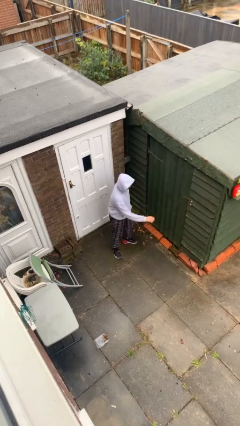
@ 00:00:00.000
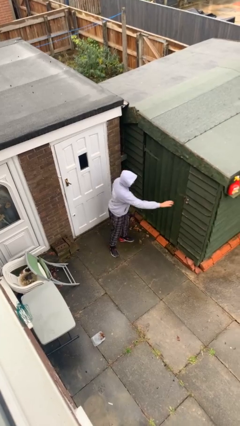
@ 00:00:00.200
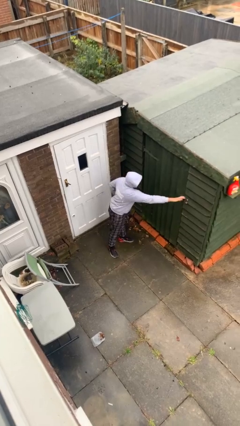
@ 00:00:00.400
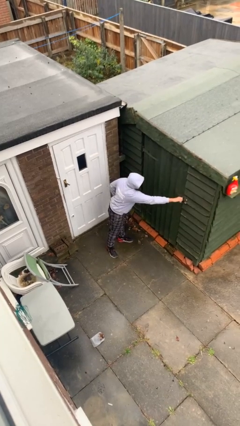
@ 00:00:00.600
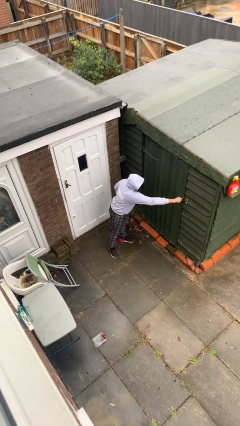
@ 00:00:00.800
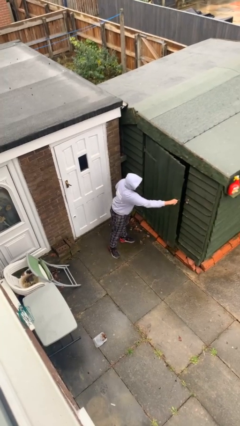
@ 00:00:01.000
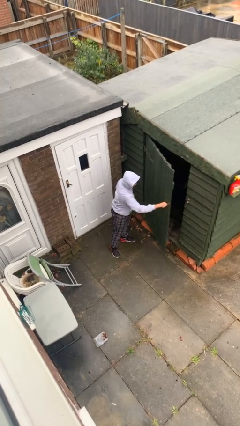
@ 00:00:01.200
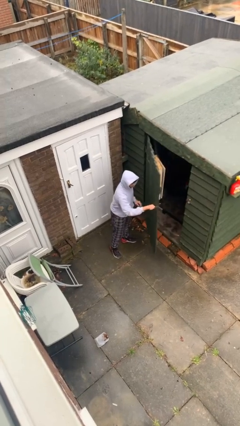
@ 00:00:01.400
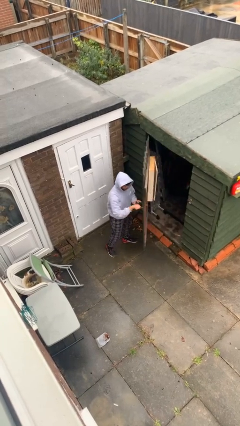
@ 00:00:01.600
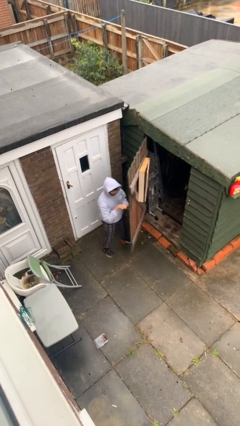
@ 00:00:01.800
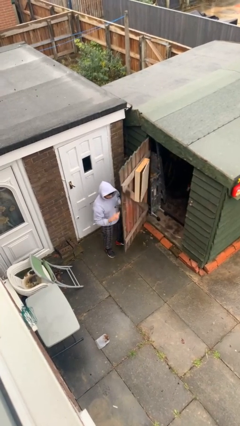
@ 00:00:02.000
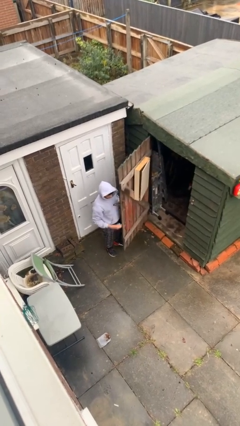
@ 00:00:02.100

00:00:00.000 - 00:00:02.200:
person opens facility door

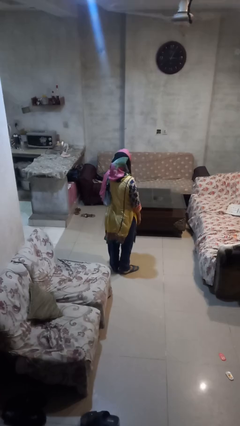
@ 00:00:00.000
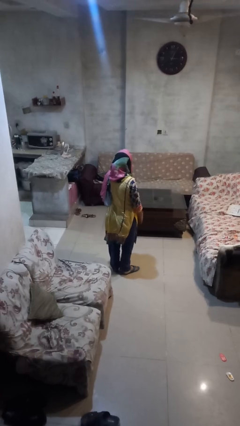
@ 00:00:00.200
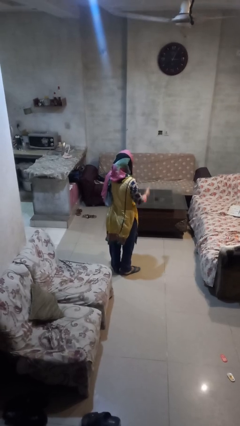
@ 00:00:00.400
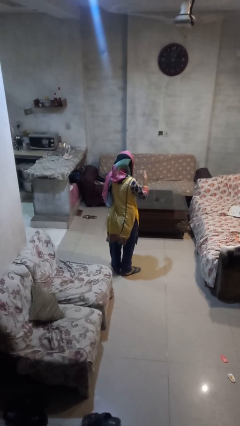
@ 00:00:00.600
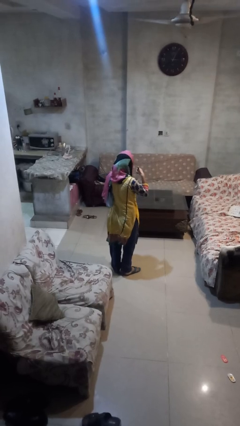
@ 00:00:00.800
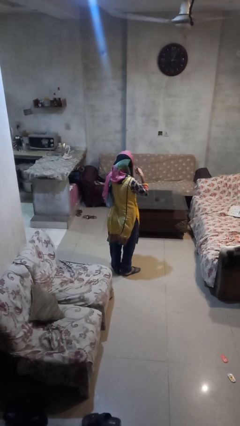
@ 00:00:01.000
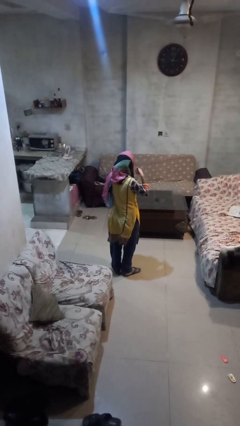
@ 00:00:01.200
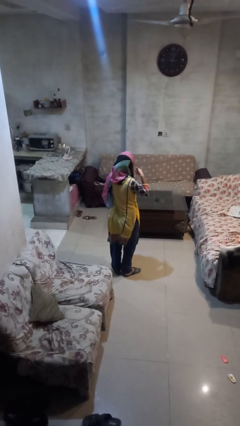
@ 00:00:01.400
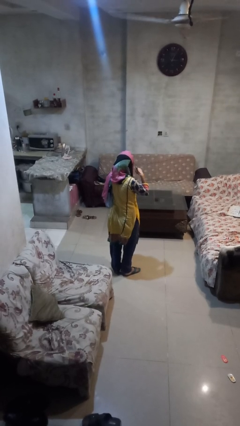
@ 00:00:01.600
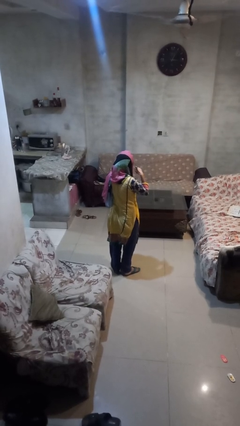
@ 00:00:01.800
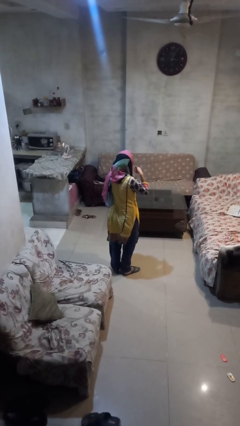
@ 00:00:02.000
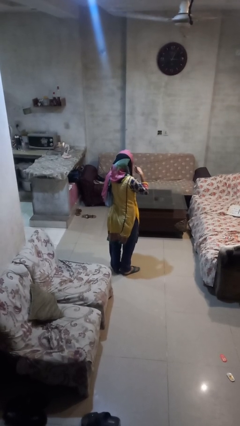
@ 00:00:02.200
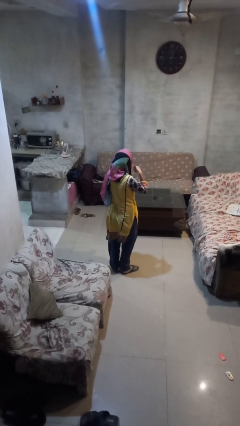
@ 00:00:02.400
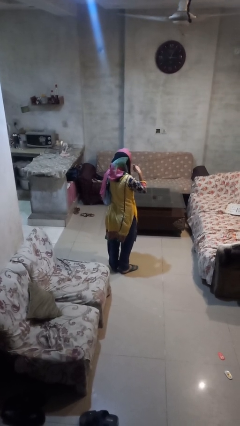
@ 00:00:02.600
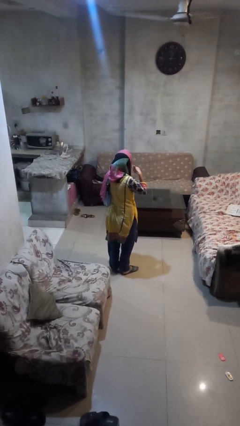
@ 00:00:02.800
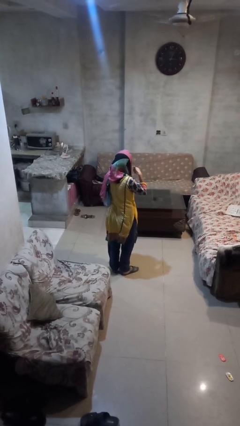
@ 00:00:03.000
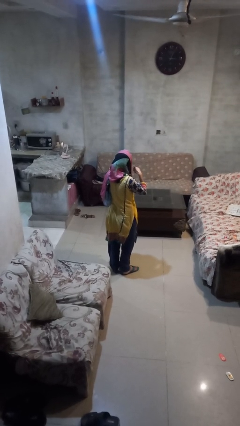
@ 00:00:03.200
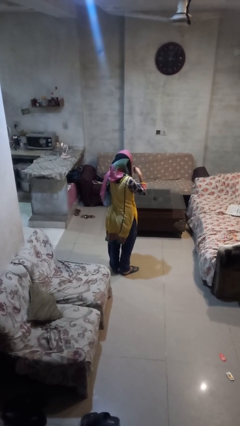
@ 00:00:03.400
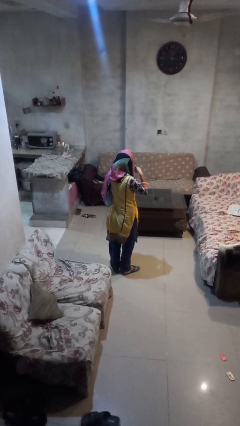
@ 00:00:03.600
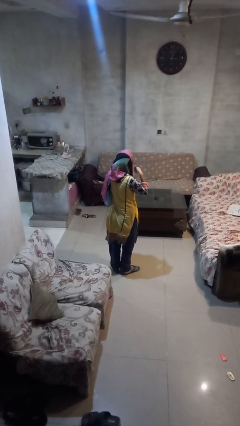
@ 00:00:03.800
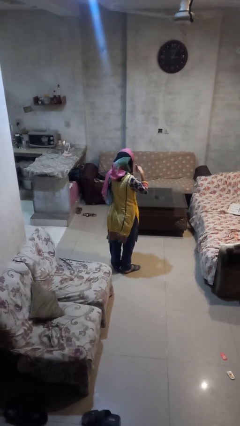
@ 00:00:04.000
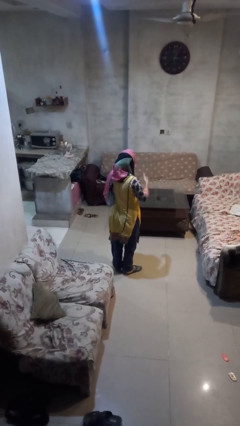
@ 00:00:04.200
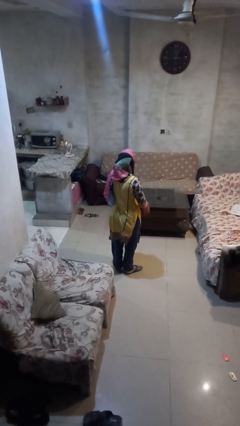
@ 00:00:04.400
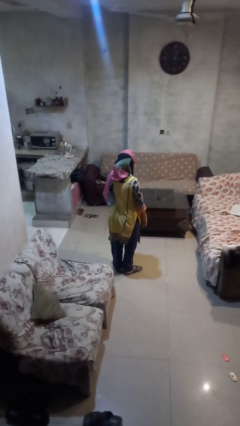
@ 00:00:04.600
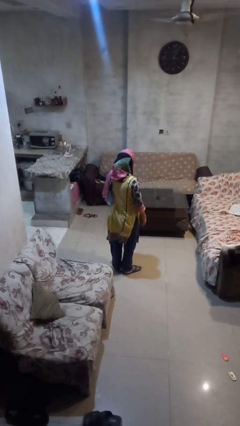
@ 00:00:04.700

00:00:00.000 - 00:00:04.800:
person gestures call me

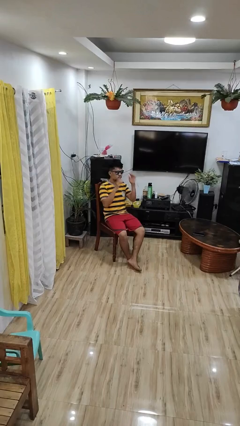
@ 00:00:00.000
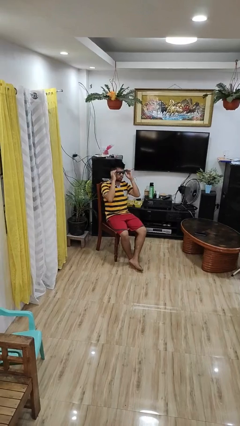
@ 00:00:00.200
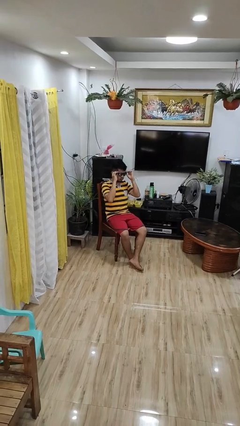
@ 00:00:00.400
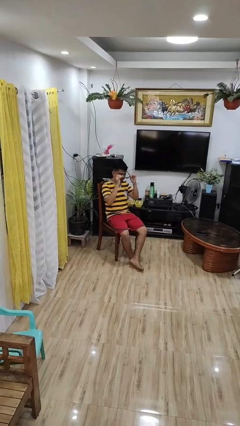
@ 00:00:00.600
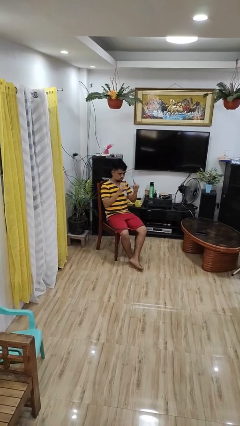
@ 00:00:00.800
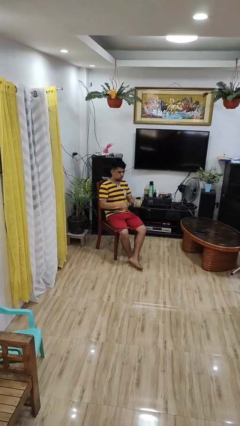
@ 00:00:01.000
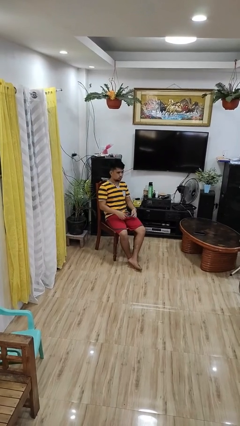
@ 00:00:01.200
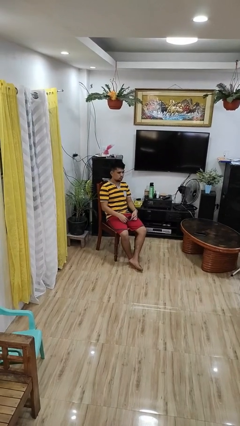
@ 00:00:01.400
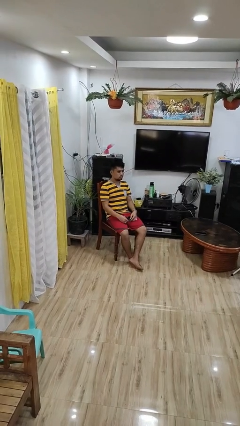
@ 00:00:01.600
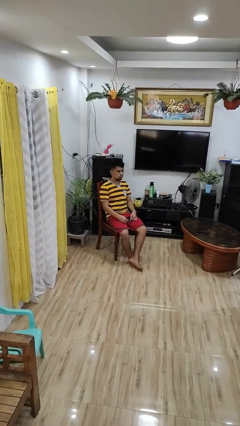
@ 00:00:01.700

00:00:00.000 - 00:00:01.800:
person takes off sunglasses

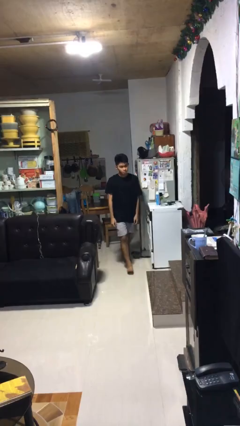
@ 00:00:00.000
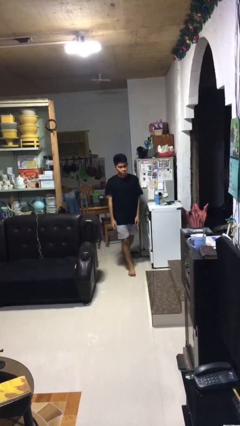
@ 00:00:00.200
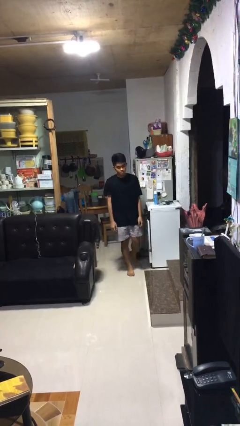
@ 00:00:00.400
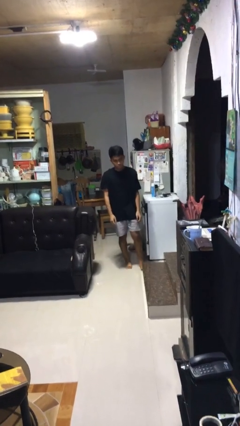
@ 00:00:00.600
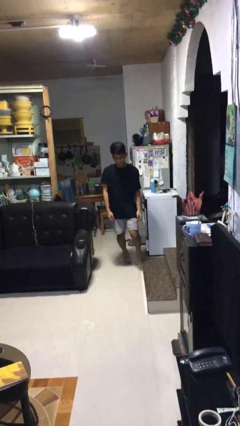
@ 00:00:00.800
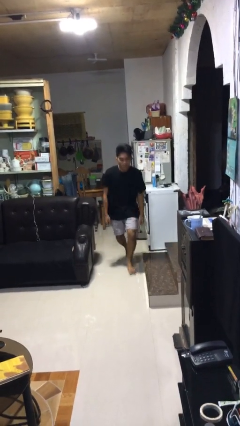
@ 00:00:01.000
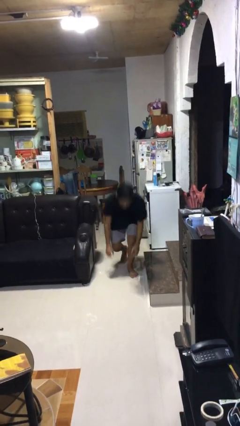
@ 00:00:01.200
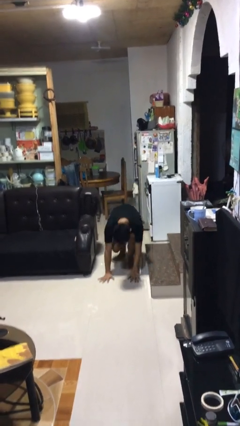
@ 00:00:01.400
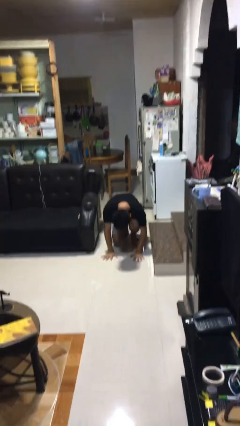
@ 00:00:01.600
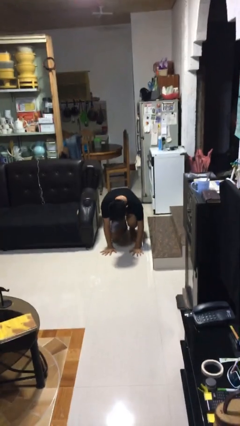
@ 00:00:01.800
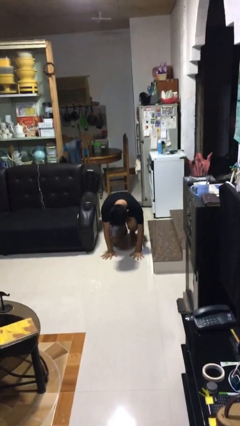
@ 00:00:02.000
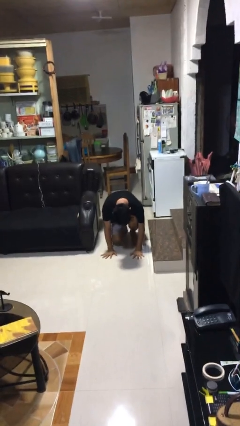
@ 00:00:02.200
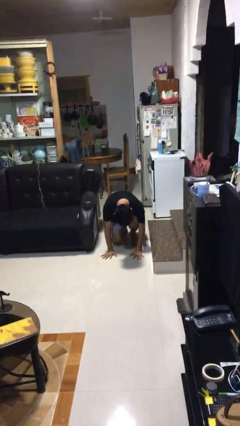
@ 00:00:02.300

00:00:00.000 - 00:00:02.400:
person trips on object on floor

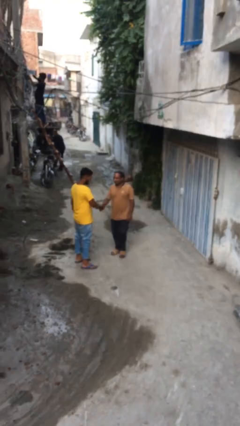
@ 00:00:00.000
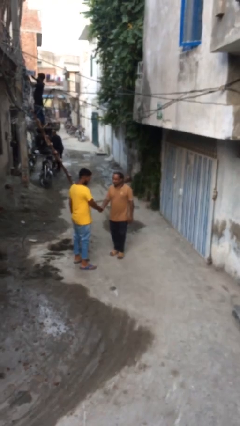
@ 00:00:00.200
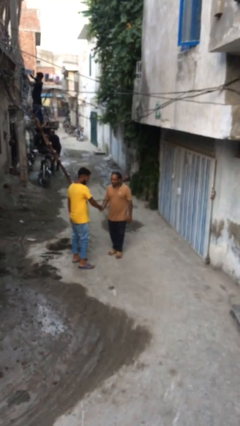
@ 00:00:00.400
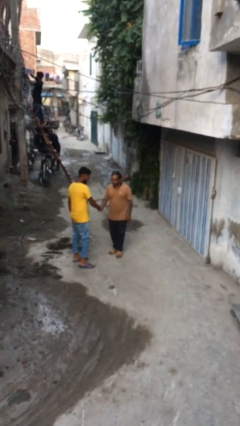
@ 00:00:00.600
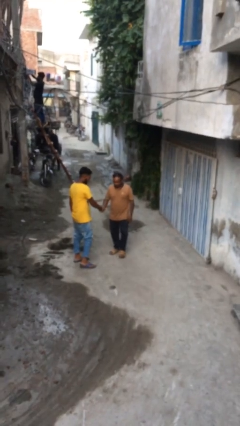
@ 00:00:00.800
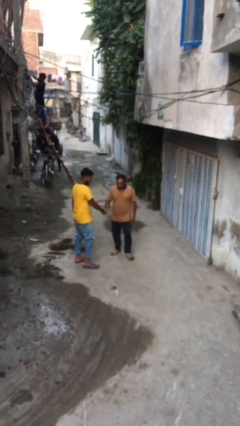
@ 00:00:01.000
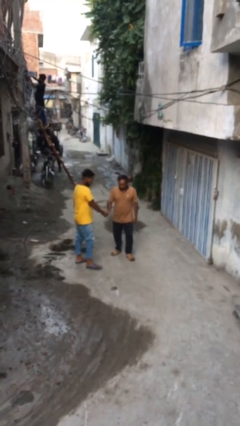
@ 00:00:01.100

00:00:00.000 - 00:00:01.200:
person shakes hand

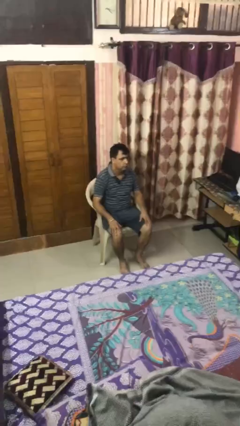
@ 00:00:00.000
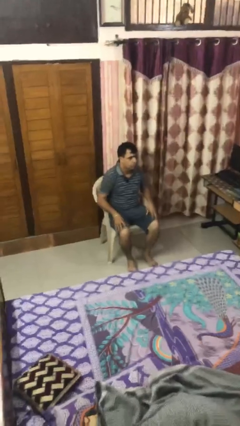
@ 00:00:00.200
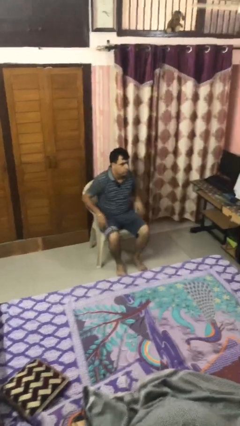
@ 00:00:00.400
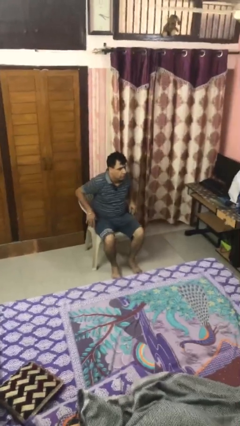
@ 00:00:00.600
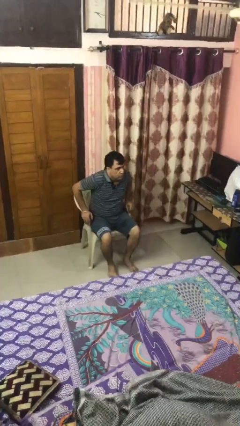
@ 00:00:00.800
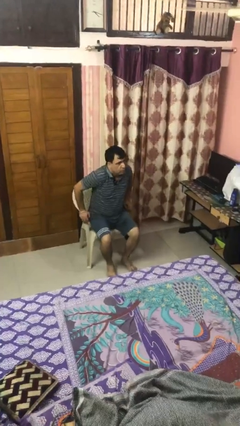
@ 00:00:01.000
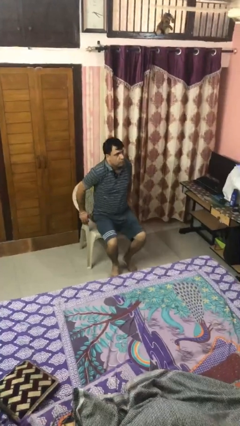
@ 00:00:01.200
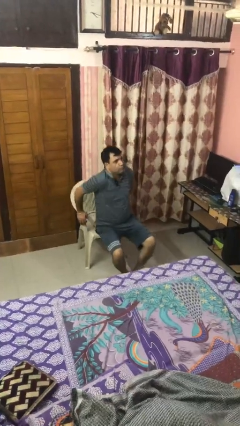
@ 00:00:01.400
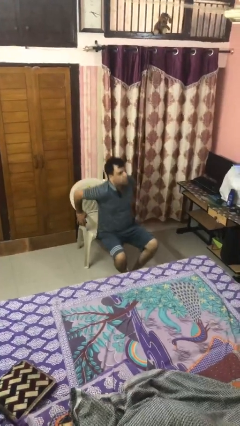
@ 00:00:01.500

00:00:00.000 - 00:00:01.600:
person falls from chair

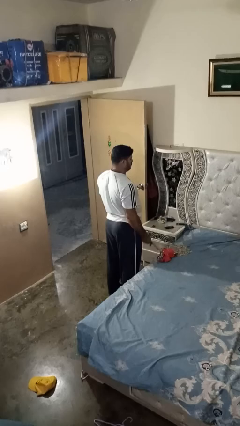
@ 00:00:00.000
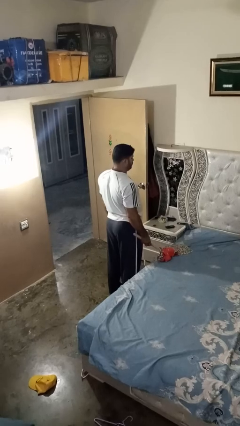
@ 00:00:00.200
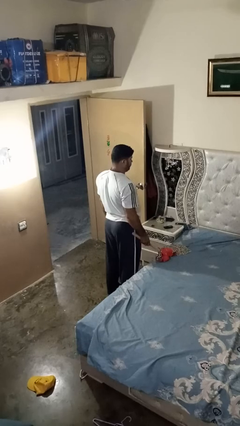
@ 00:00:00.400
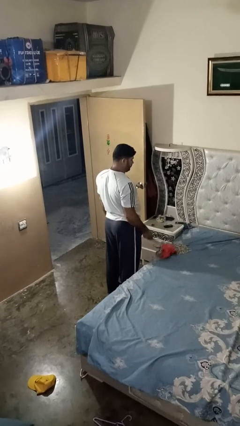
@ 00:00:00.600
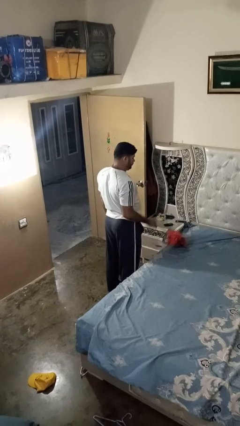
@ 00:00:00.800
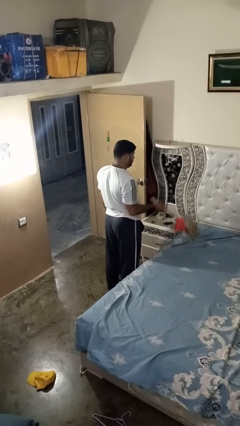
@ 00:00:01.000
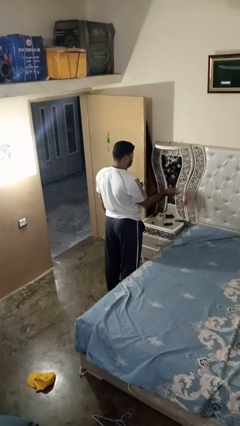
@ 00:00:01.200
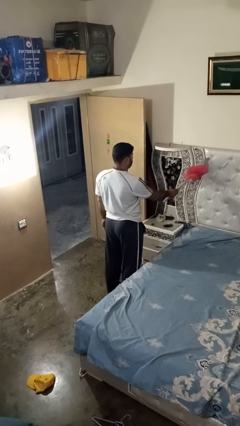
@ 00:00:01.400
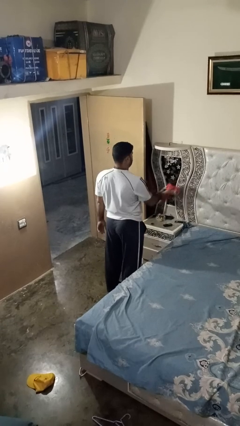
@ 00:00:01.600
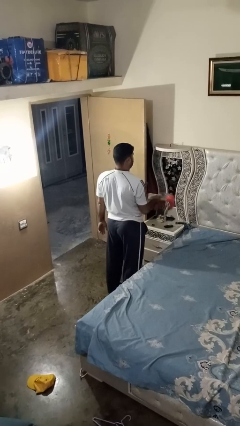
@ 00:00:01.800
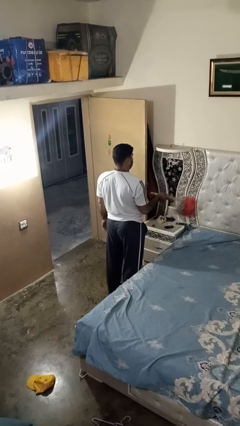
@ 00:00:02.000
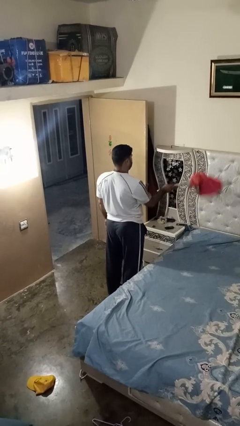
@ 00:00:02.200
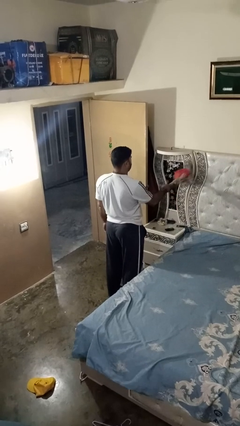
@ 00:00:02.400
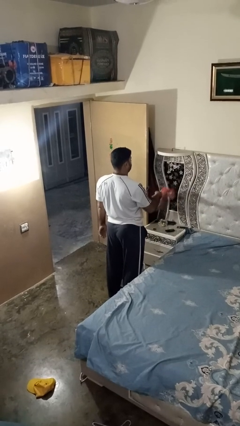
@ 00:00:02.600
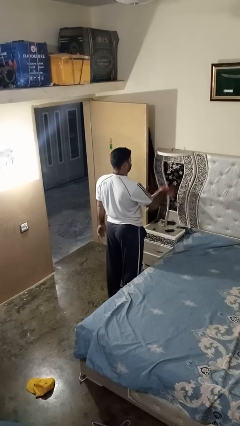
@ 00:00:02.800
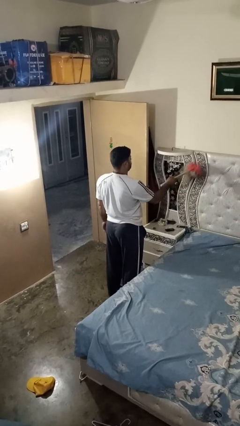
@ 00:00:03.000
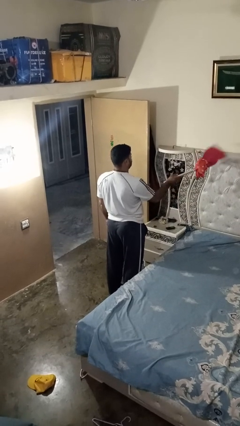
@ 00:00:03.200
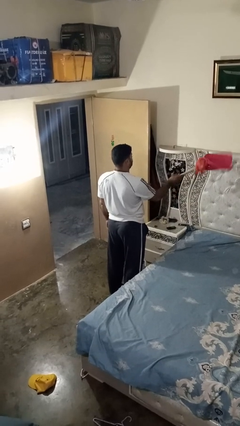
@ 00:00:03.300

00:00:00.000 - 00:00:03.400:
person dusts furniture
